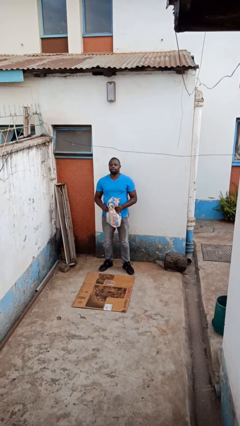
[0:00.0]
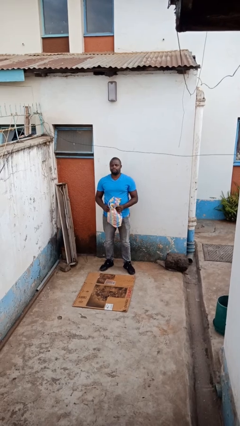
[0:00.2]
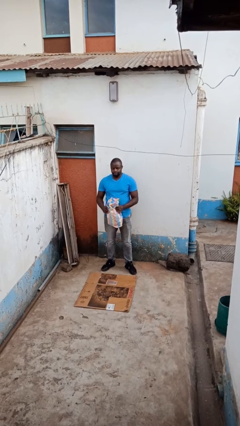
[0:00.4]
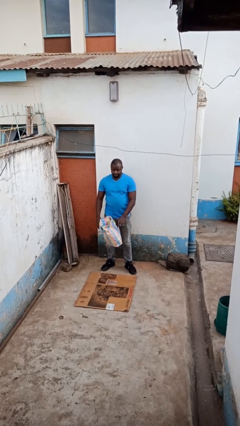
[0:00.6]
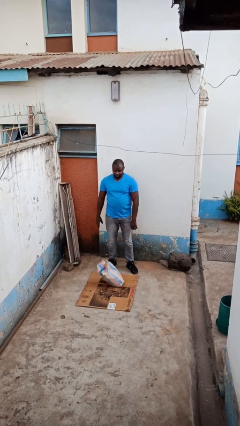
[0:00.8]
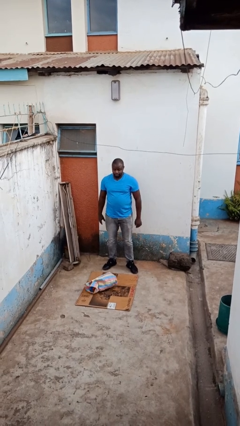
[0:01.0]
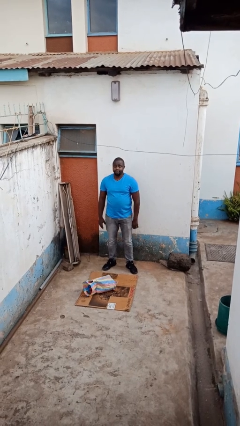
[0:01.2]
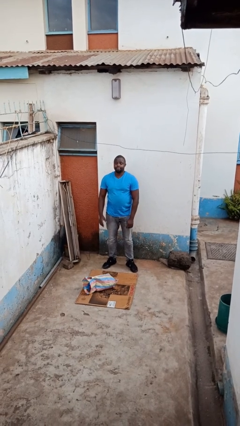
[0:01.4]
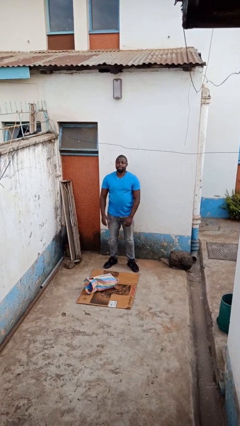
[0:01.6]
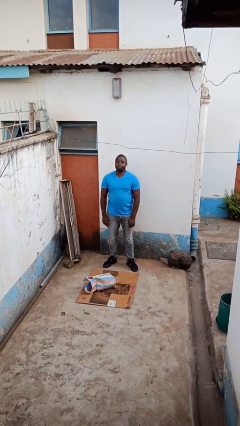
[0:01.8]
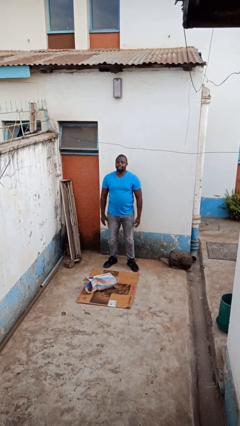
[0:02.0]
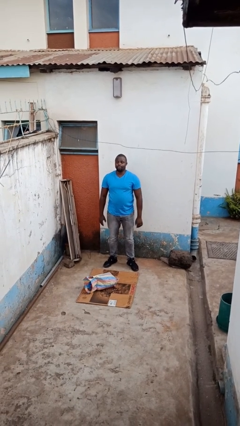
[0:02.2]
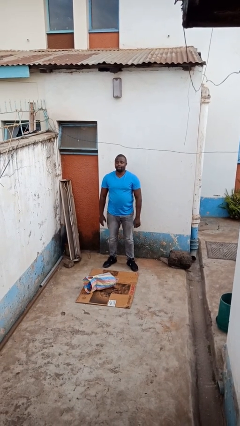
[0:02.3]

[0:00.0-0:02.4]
person drops object

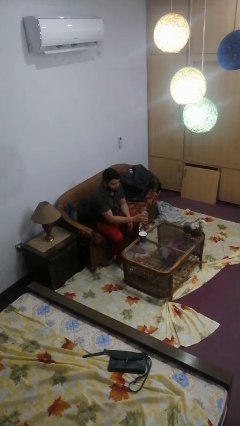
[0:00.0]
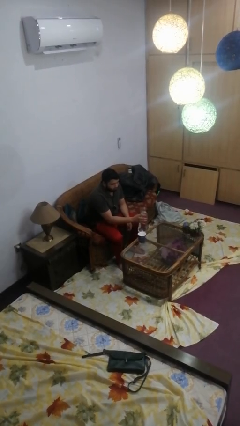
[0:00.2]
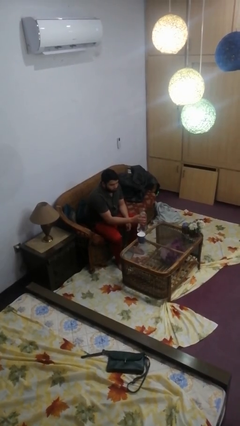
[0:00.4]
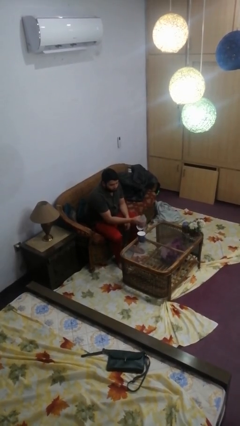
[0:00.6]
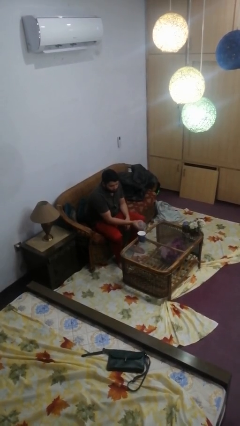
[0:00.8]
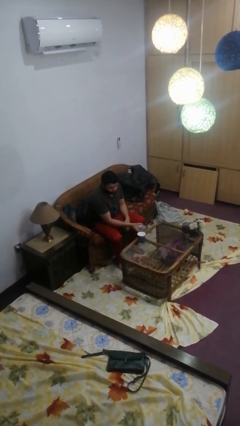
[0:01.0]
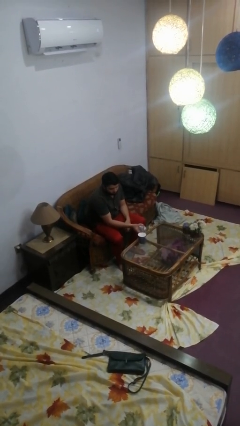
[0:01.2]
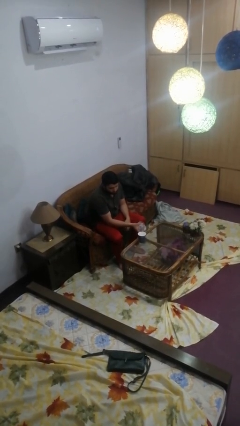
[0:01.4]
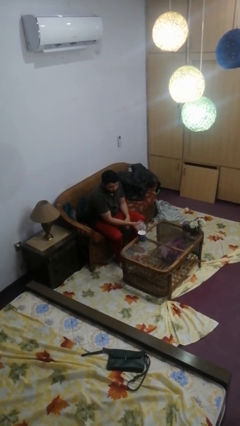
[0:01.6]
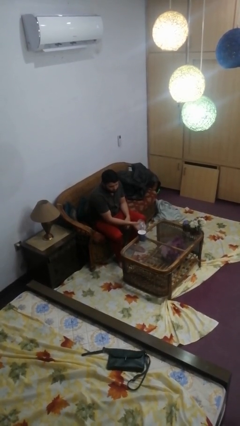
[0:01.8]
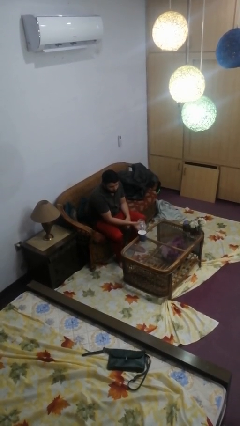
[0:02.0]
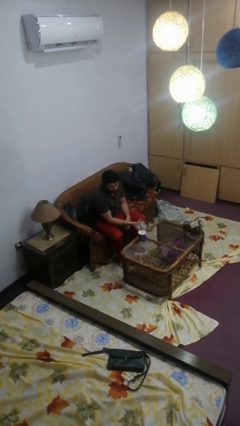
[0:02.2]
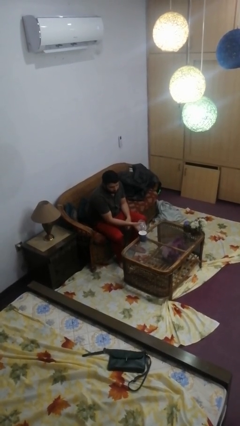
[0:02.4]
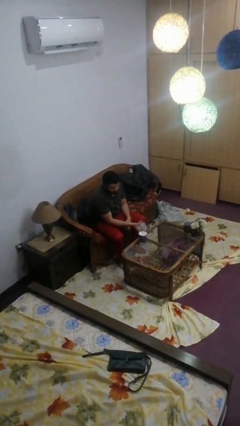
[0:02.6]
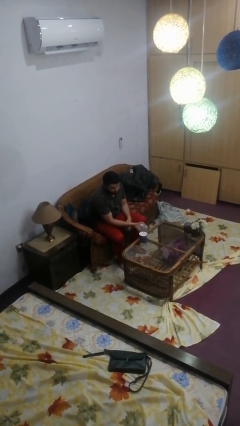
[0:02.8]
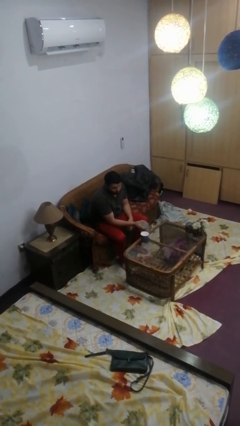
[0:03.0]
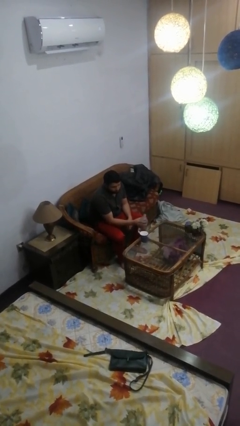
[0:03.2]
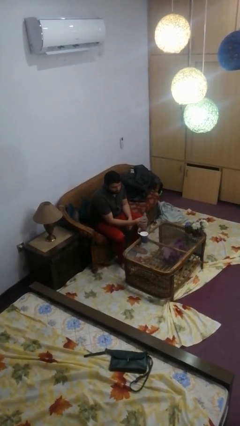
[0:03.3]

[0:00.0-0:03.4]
person pours liquid into cup

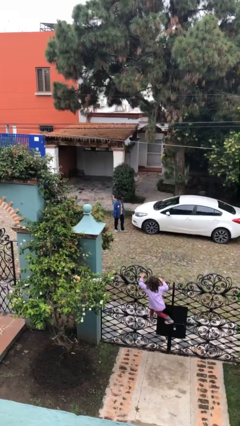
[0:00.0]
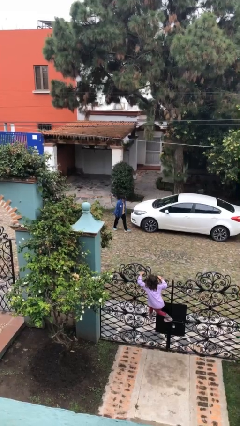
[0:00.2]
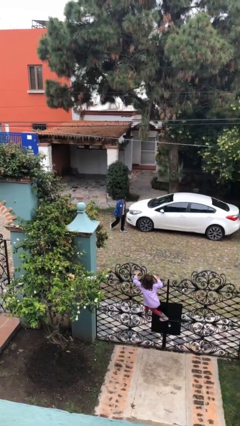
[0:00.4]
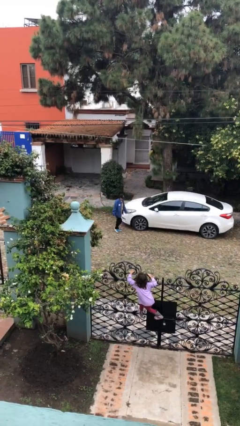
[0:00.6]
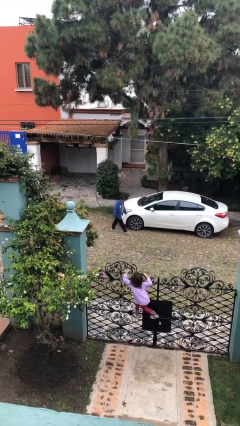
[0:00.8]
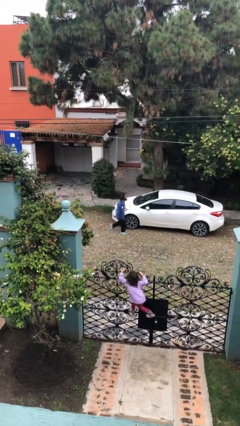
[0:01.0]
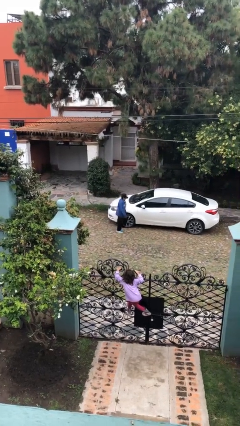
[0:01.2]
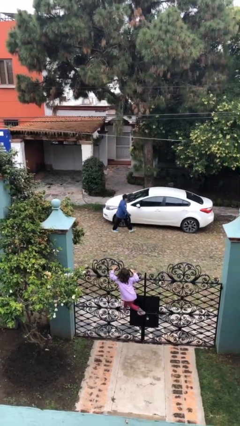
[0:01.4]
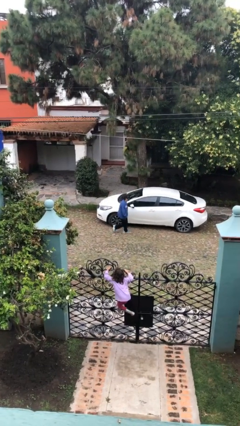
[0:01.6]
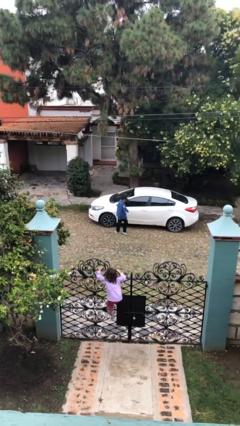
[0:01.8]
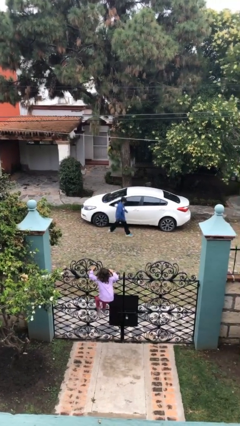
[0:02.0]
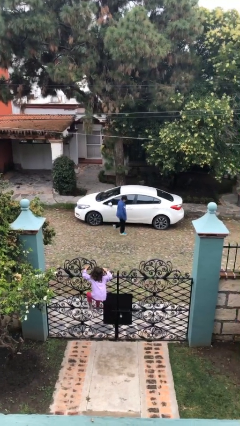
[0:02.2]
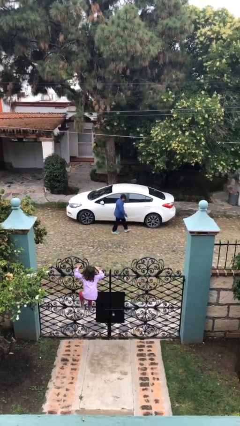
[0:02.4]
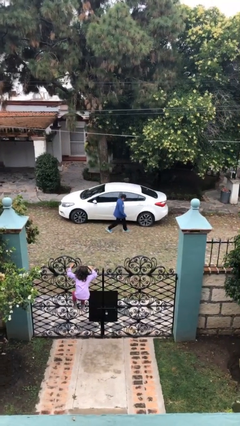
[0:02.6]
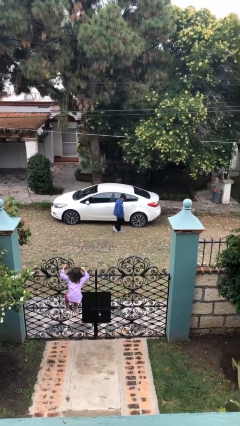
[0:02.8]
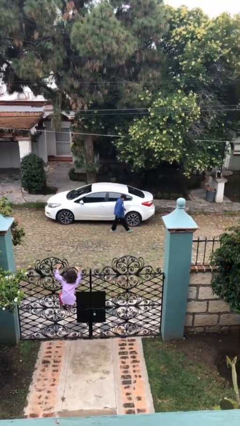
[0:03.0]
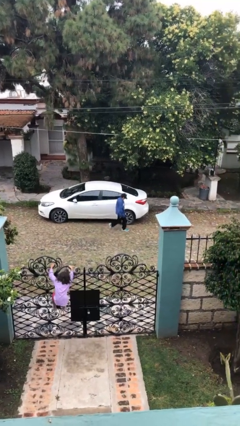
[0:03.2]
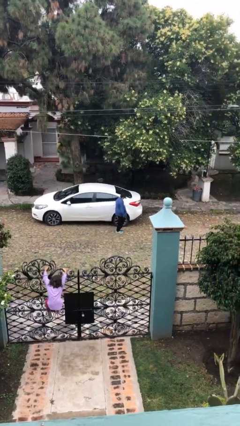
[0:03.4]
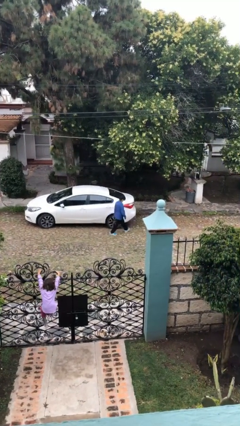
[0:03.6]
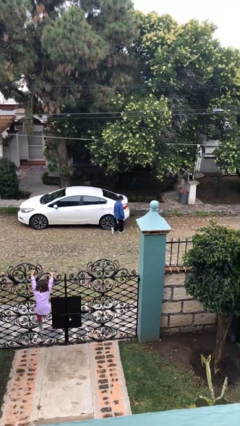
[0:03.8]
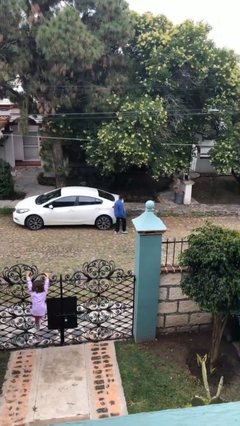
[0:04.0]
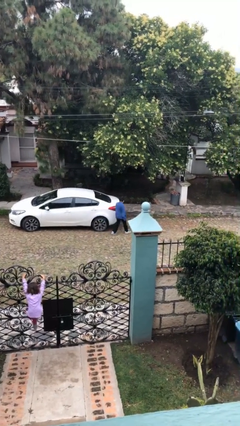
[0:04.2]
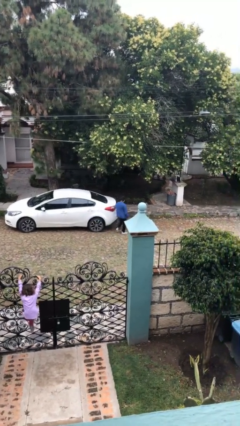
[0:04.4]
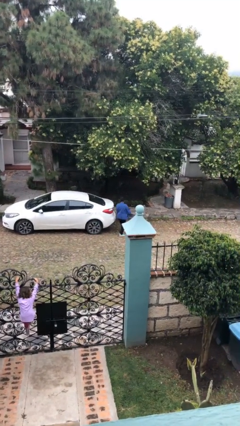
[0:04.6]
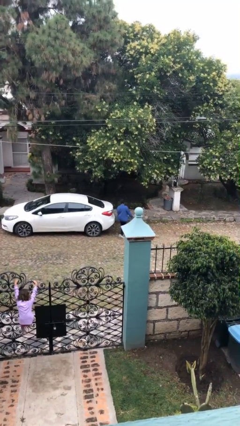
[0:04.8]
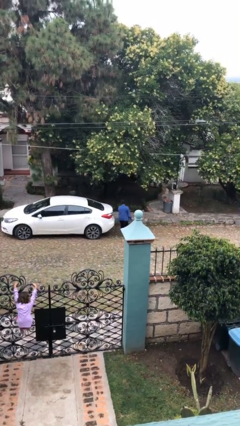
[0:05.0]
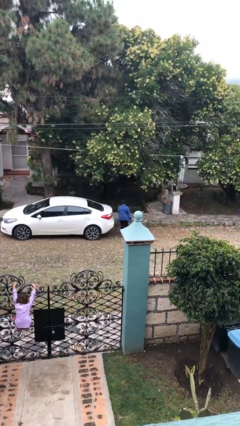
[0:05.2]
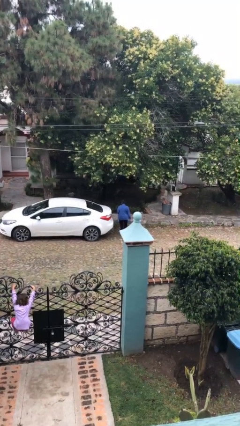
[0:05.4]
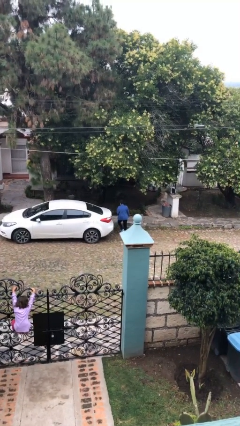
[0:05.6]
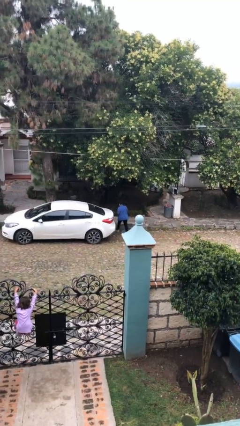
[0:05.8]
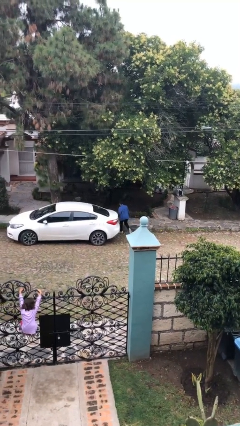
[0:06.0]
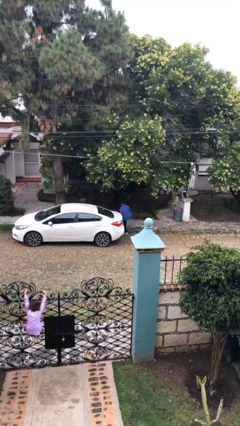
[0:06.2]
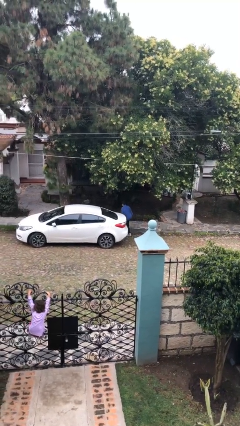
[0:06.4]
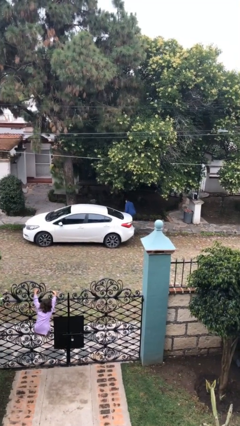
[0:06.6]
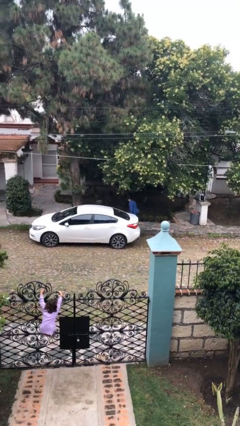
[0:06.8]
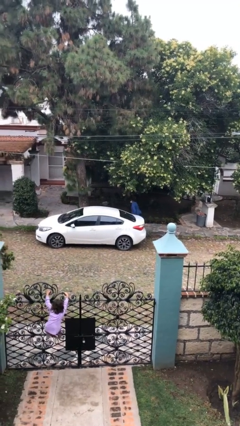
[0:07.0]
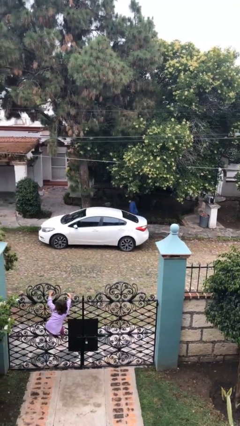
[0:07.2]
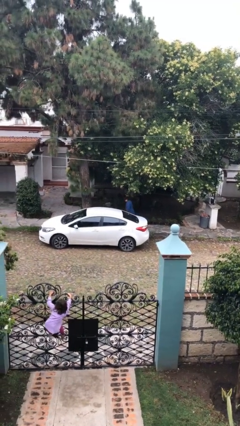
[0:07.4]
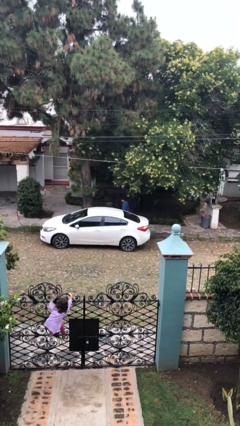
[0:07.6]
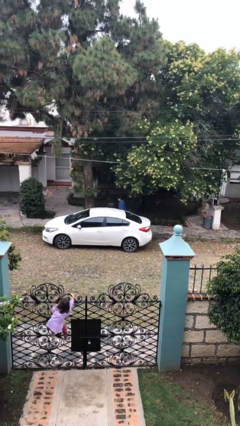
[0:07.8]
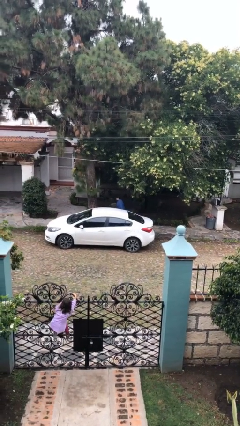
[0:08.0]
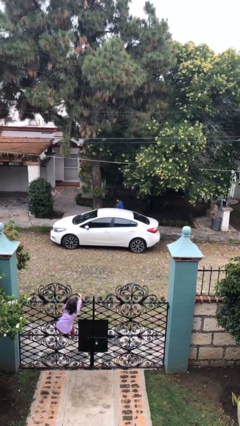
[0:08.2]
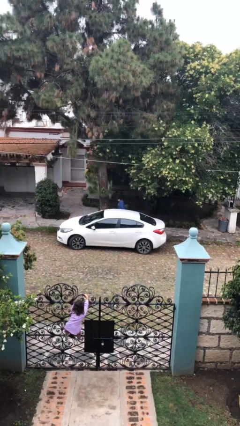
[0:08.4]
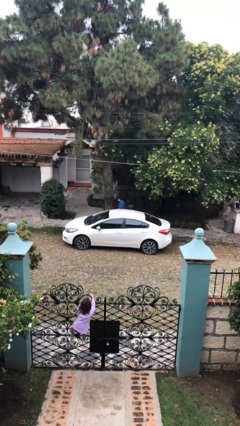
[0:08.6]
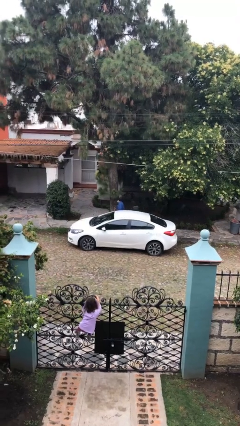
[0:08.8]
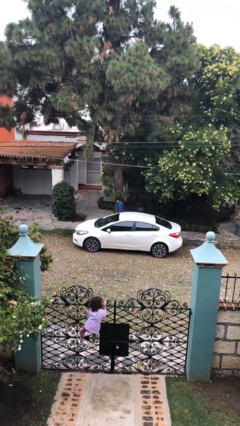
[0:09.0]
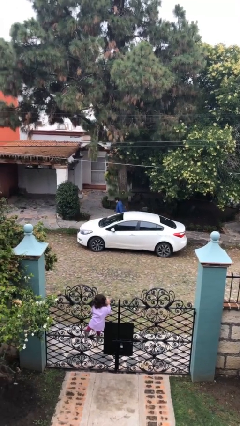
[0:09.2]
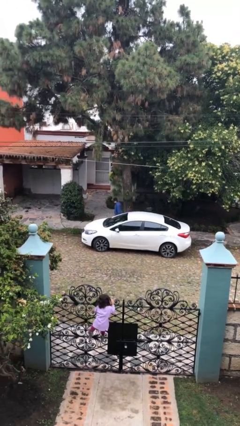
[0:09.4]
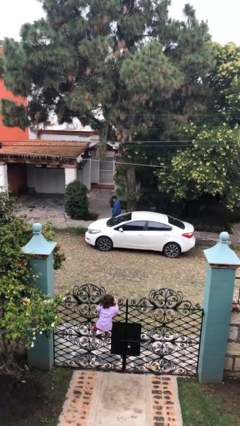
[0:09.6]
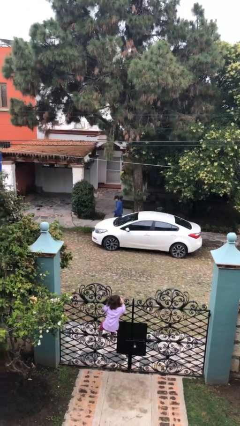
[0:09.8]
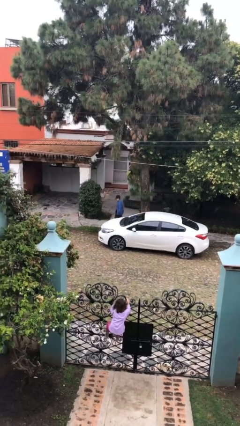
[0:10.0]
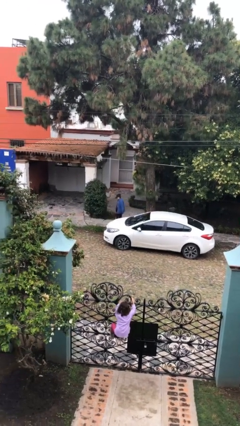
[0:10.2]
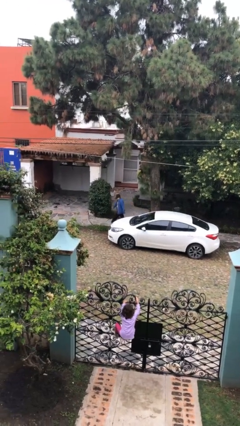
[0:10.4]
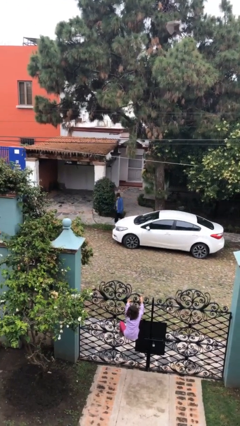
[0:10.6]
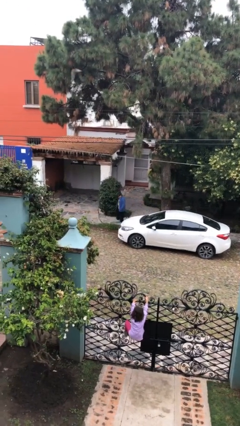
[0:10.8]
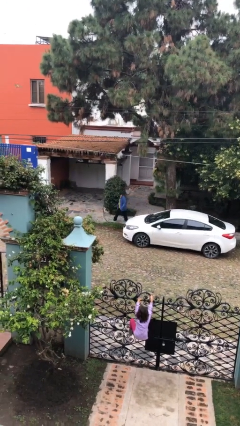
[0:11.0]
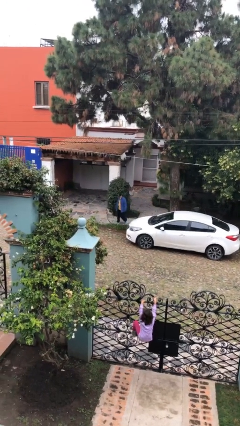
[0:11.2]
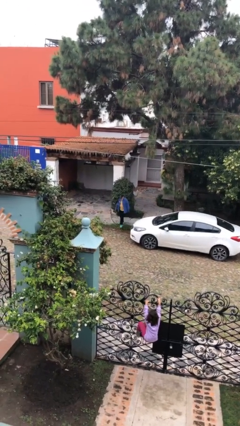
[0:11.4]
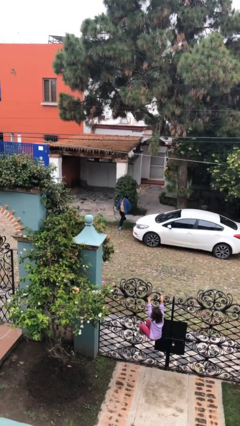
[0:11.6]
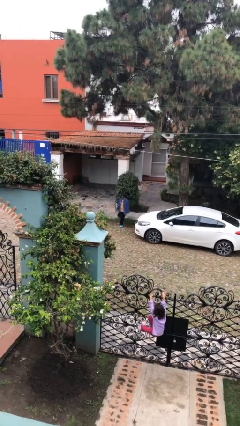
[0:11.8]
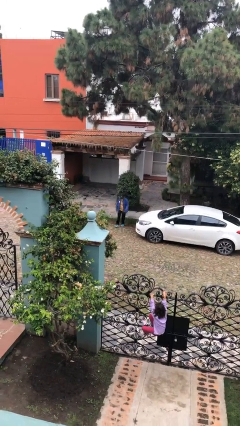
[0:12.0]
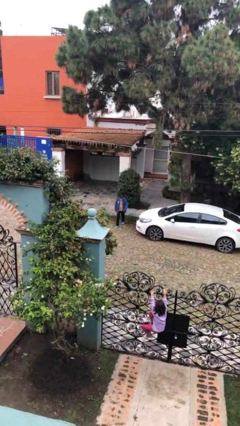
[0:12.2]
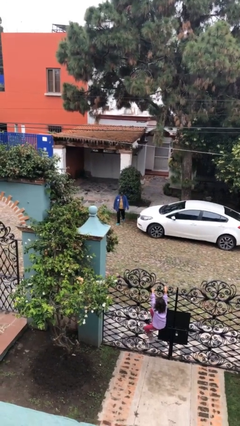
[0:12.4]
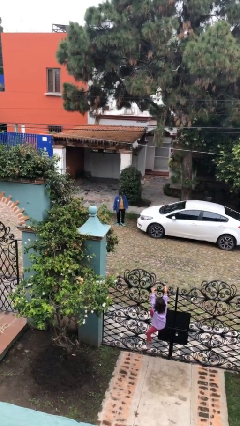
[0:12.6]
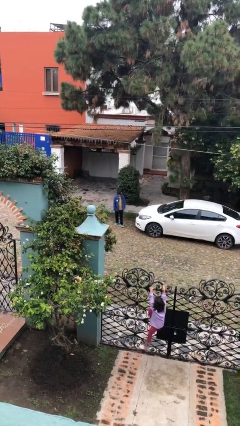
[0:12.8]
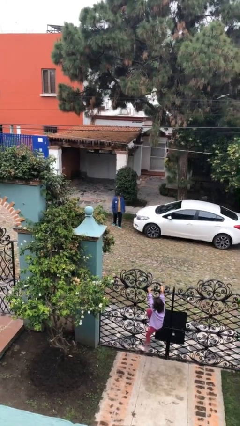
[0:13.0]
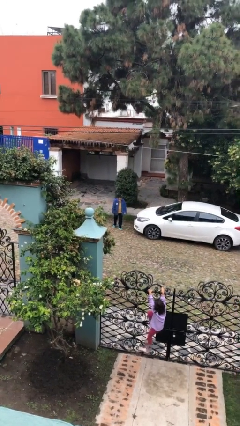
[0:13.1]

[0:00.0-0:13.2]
person walks around car
